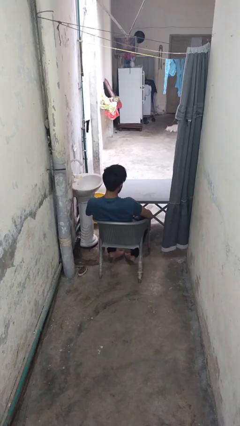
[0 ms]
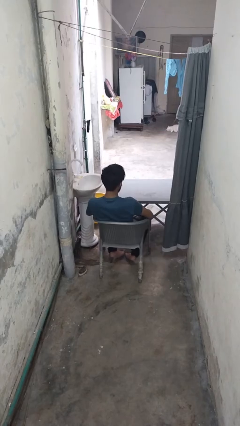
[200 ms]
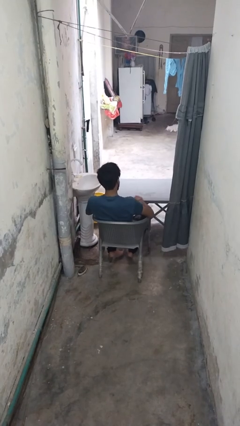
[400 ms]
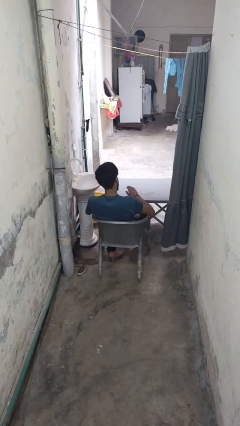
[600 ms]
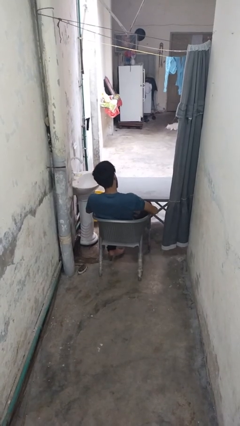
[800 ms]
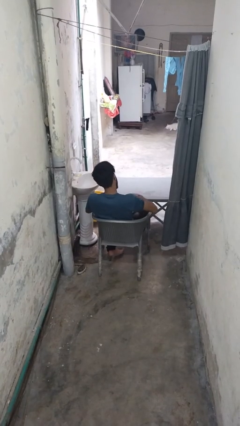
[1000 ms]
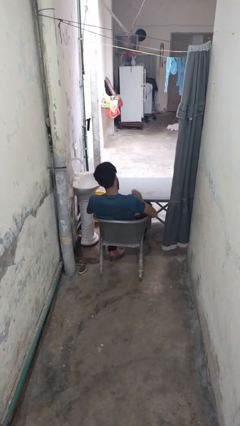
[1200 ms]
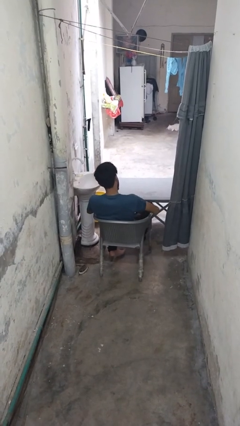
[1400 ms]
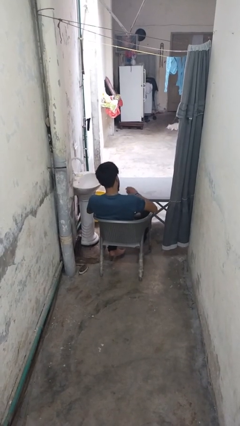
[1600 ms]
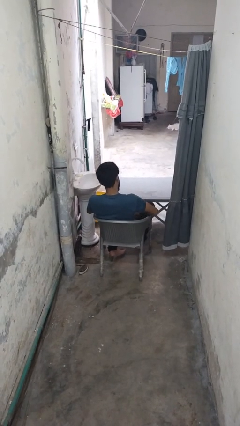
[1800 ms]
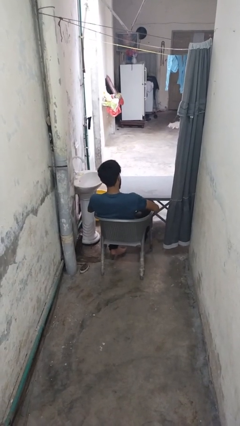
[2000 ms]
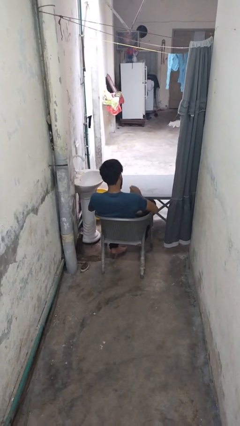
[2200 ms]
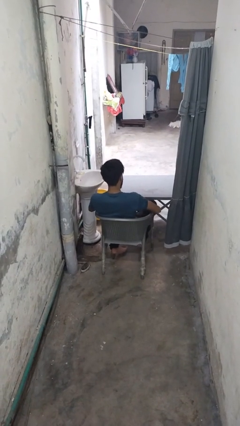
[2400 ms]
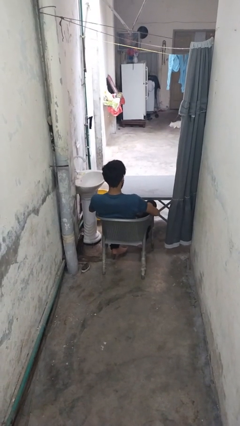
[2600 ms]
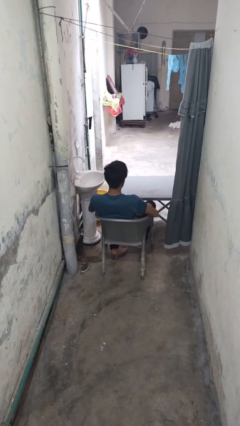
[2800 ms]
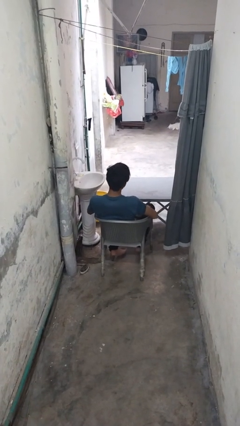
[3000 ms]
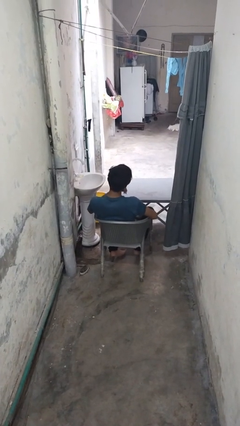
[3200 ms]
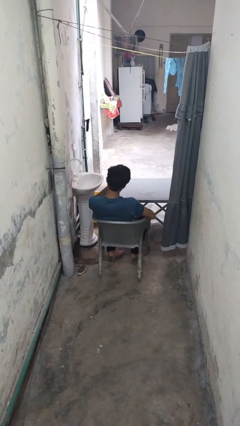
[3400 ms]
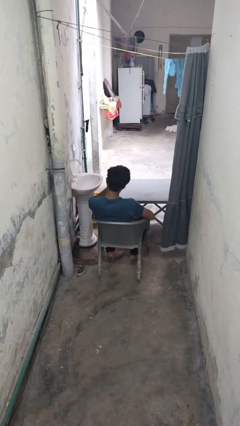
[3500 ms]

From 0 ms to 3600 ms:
person slaps hands on thighs

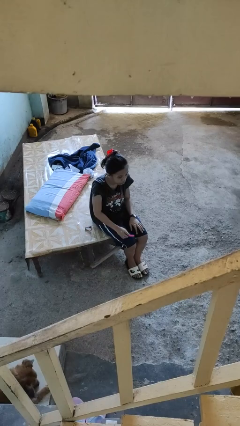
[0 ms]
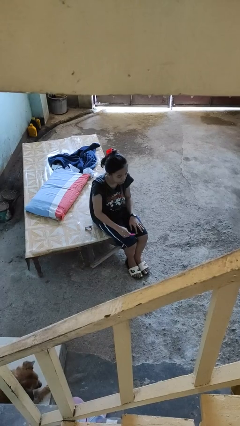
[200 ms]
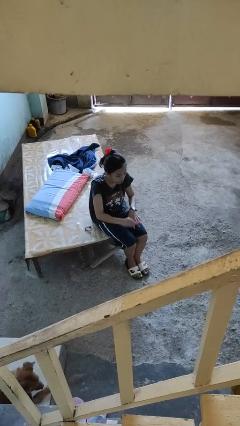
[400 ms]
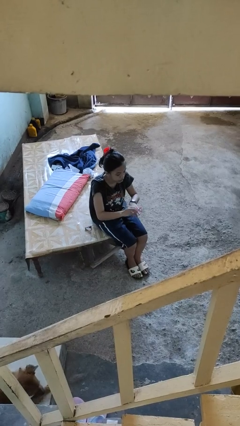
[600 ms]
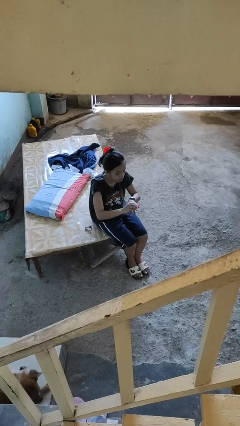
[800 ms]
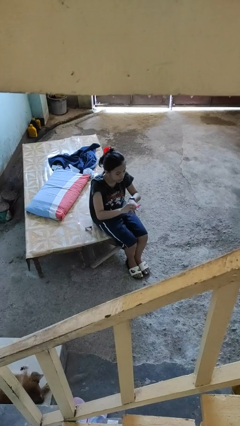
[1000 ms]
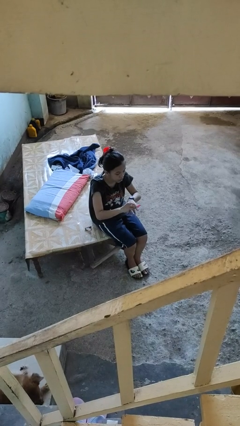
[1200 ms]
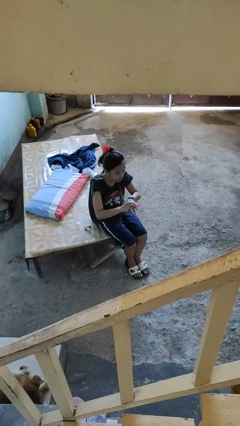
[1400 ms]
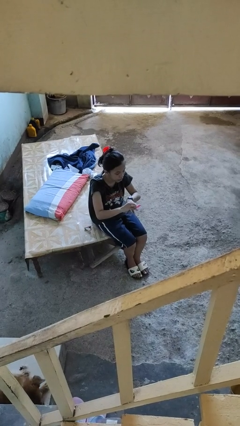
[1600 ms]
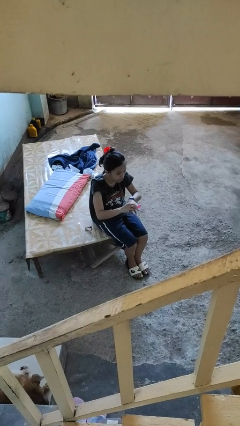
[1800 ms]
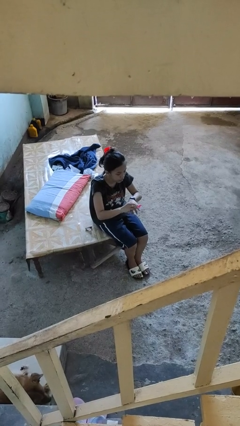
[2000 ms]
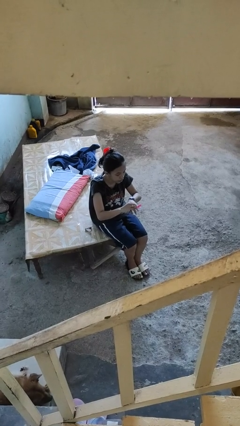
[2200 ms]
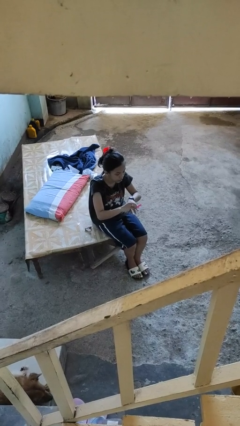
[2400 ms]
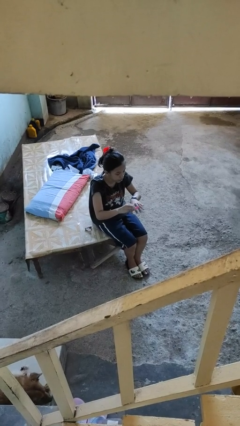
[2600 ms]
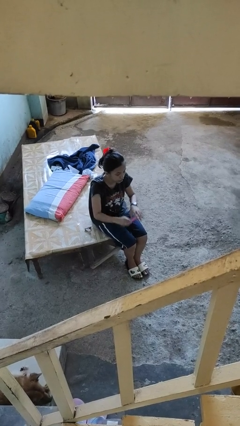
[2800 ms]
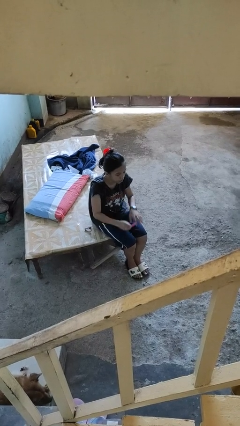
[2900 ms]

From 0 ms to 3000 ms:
person files fingernails

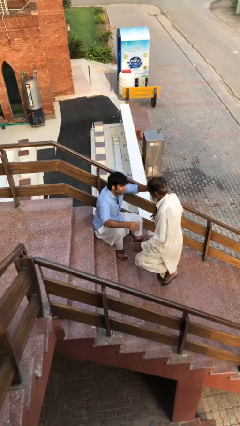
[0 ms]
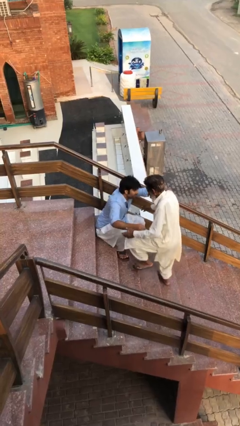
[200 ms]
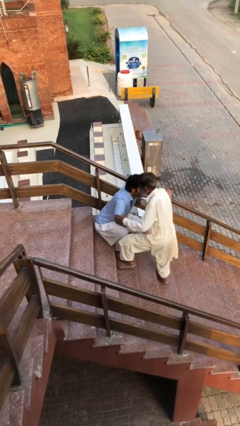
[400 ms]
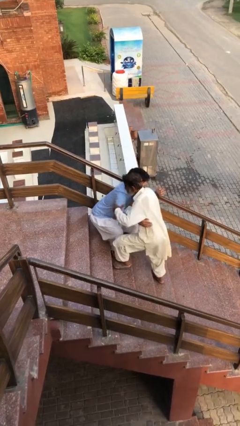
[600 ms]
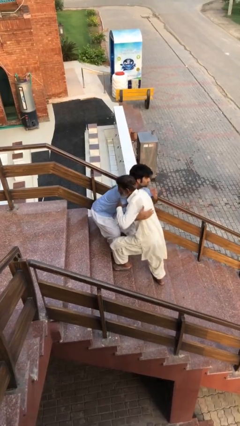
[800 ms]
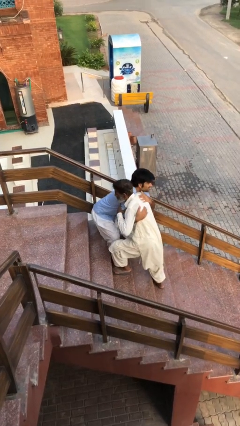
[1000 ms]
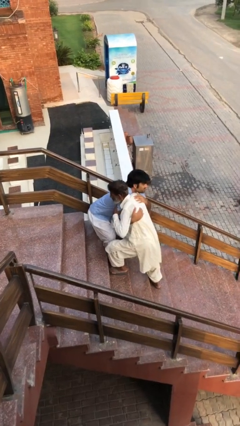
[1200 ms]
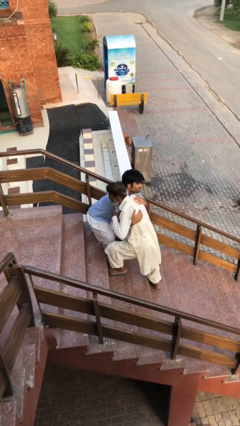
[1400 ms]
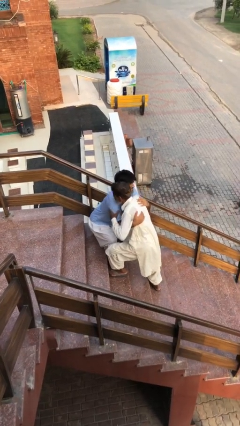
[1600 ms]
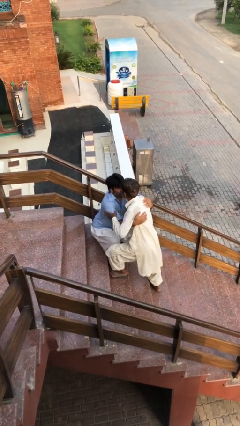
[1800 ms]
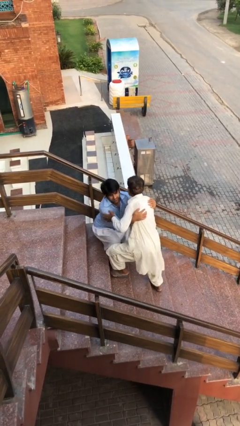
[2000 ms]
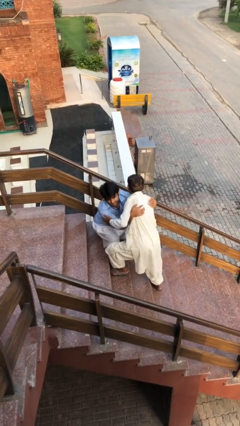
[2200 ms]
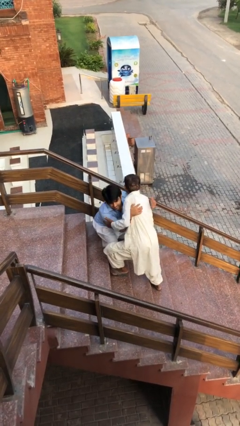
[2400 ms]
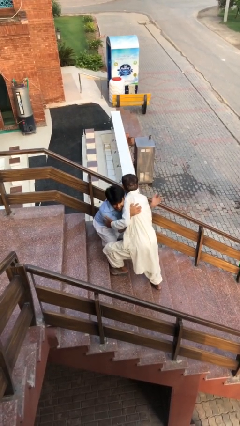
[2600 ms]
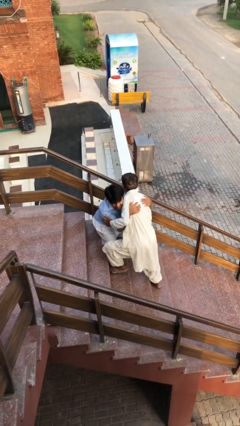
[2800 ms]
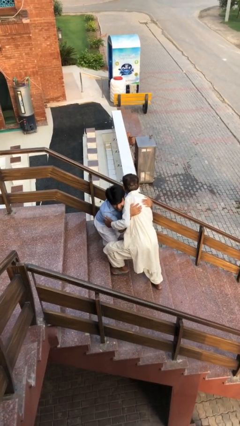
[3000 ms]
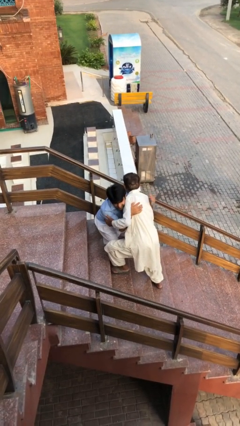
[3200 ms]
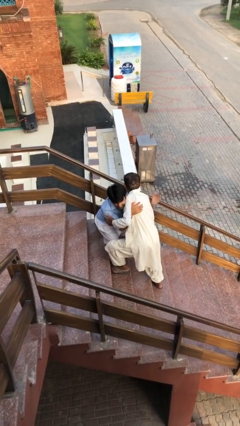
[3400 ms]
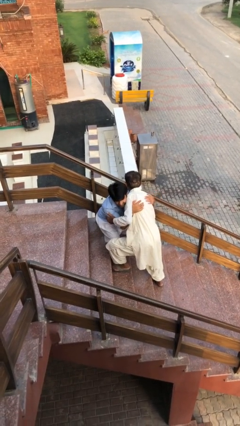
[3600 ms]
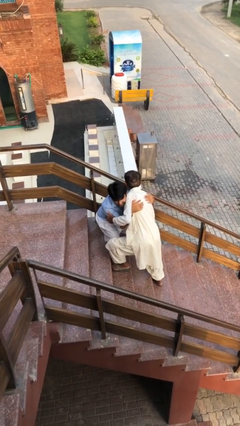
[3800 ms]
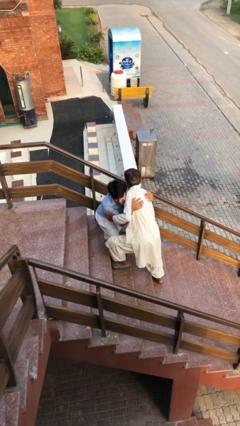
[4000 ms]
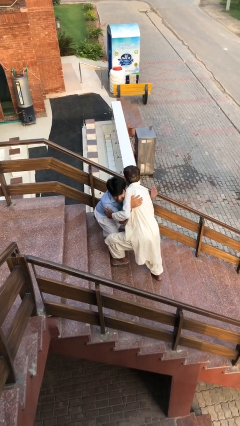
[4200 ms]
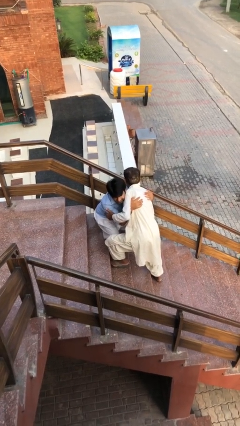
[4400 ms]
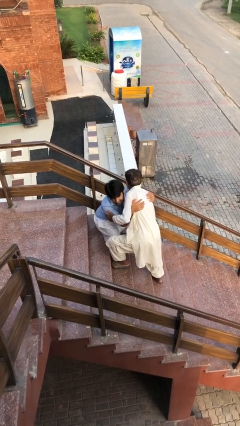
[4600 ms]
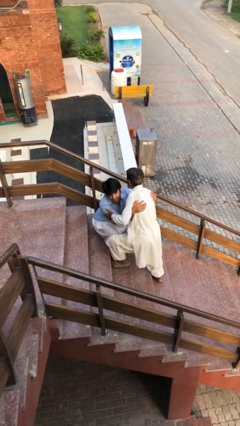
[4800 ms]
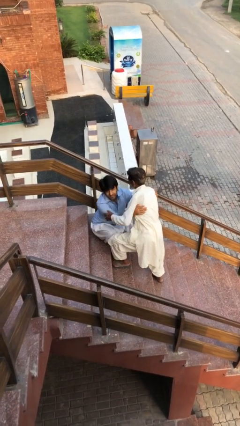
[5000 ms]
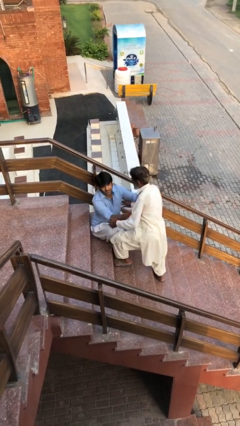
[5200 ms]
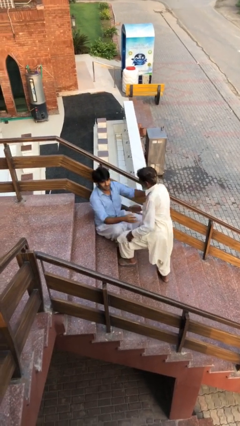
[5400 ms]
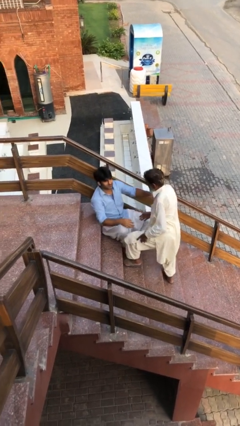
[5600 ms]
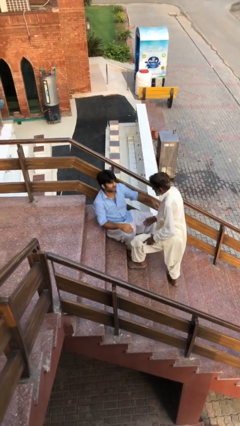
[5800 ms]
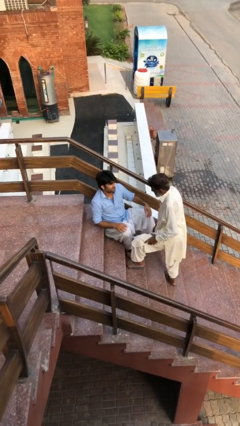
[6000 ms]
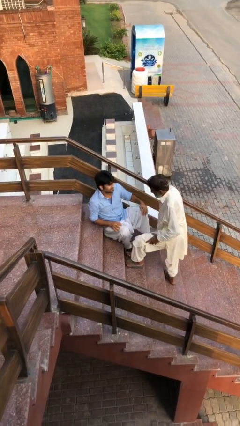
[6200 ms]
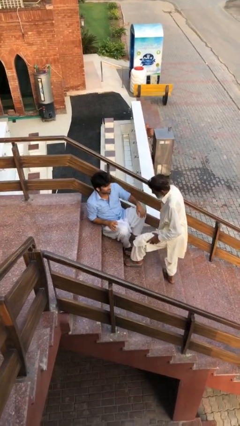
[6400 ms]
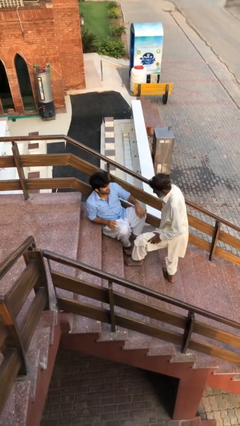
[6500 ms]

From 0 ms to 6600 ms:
person embraces person

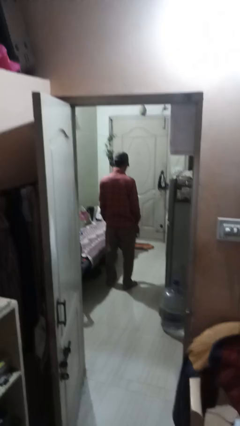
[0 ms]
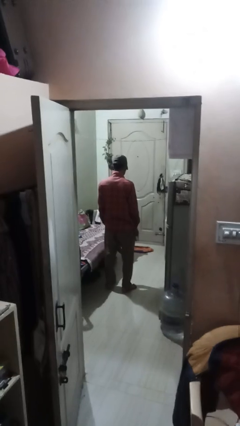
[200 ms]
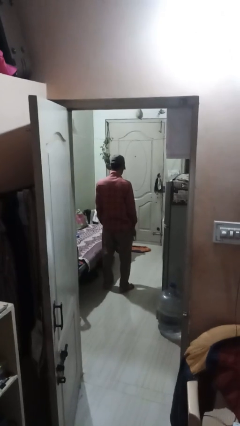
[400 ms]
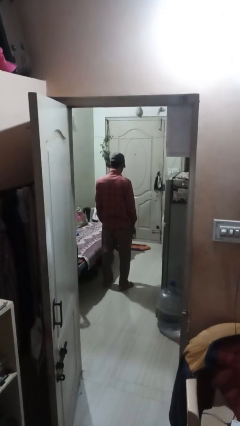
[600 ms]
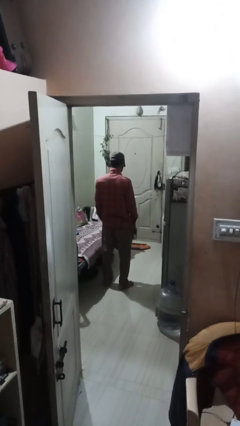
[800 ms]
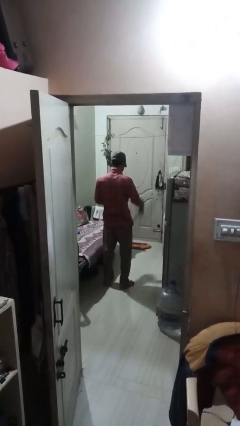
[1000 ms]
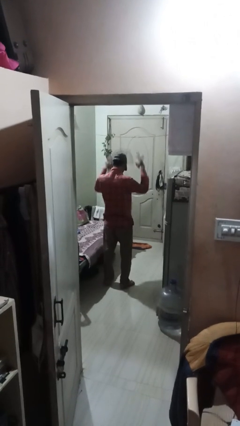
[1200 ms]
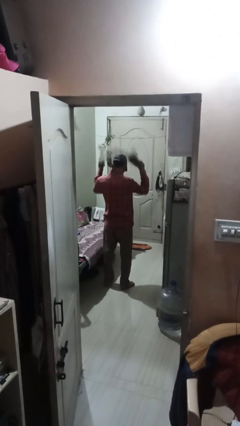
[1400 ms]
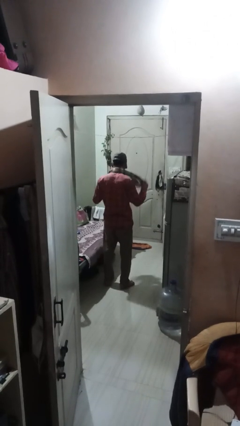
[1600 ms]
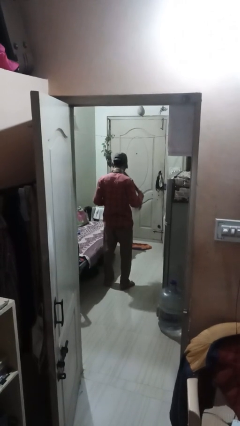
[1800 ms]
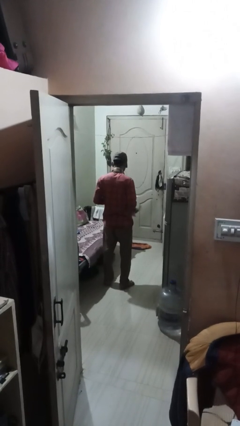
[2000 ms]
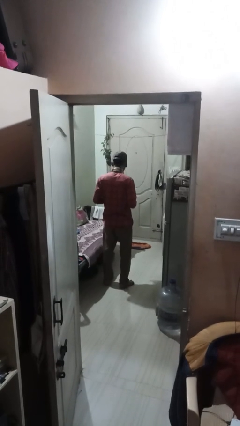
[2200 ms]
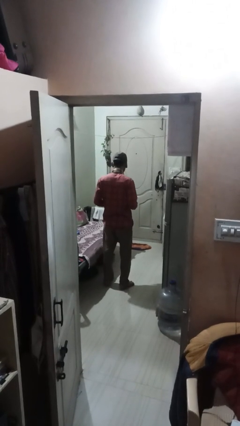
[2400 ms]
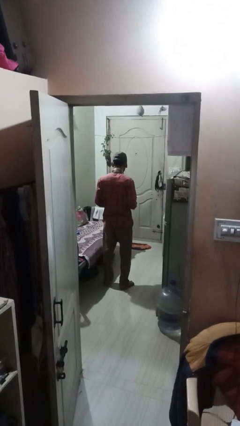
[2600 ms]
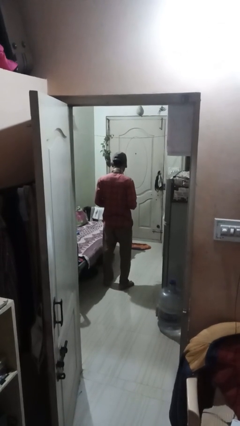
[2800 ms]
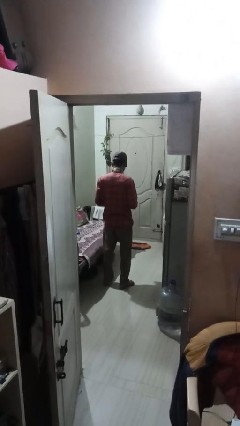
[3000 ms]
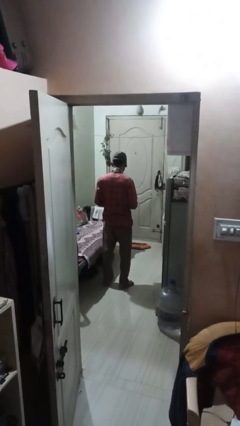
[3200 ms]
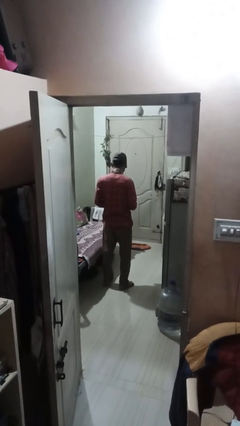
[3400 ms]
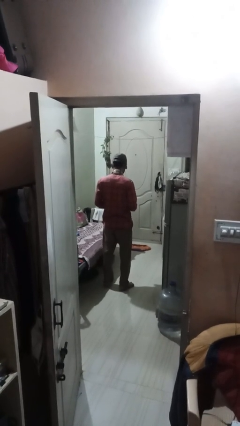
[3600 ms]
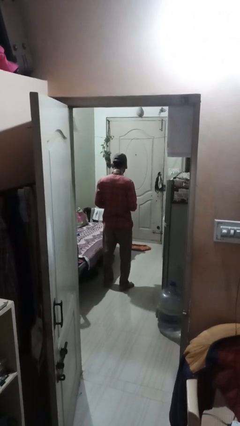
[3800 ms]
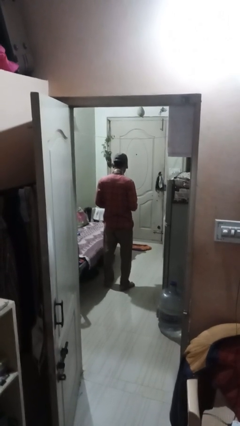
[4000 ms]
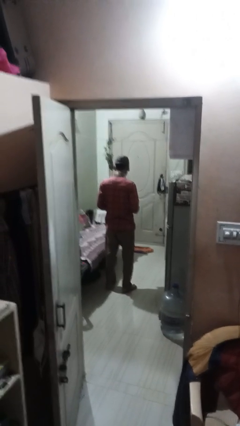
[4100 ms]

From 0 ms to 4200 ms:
person puts on scarf

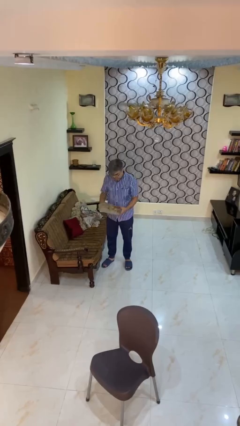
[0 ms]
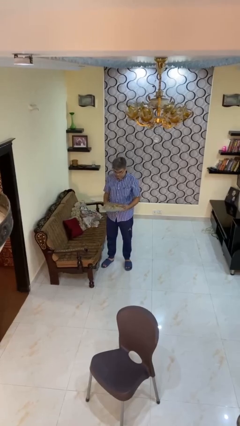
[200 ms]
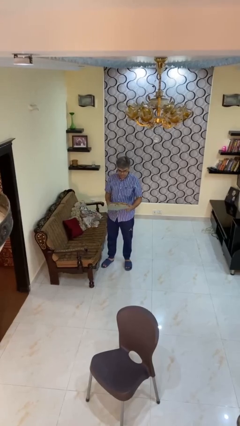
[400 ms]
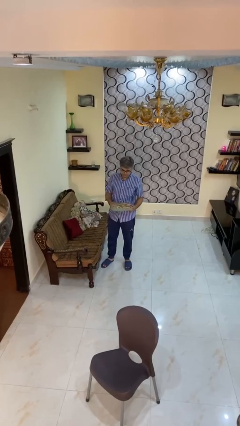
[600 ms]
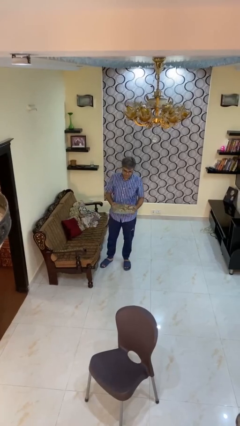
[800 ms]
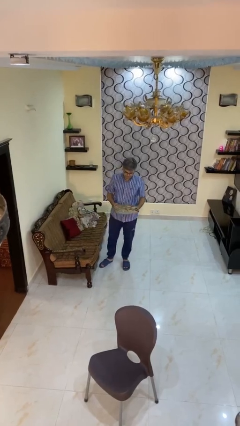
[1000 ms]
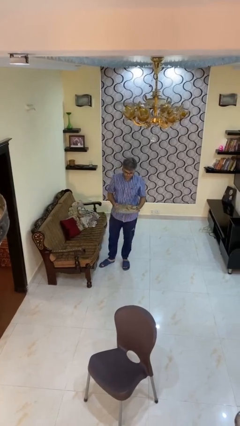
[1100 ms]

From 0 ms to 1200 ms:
person picks up object from couch
